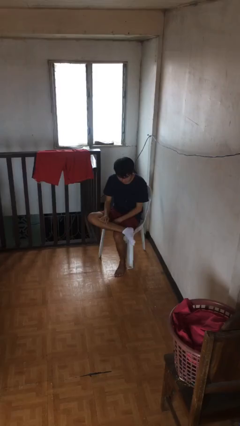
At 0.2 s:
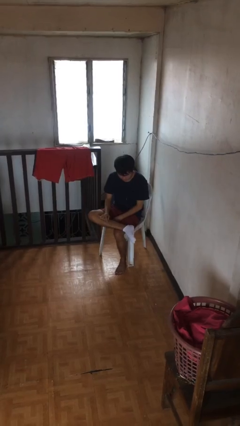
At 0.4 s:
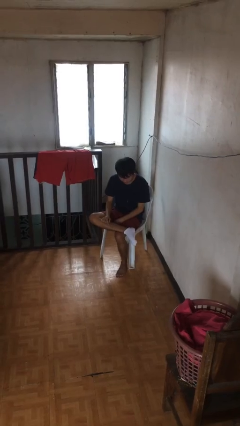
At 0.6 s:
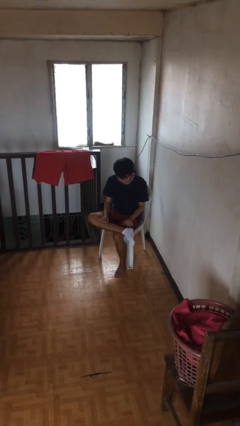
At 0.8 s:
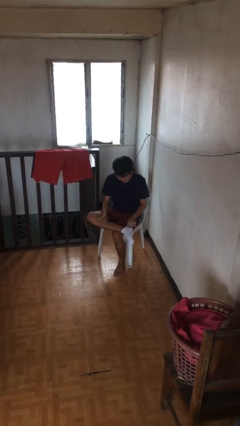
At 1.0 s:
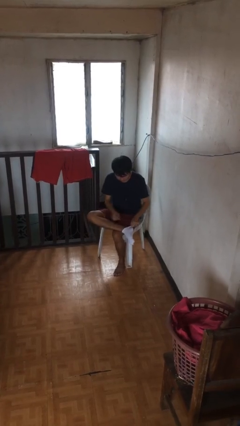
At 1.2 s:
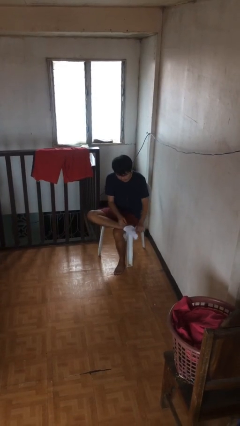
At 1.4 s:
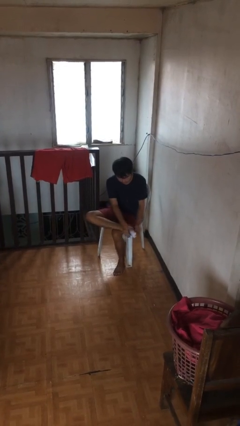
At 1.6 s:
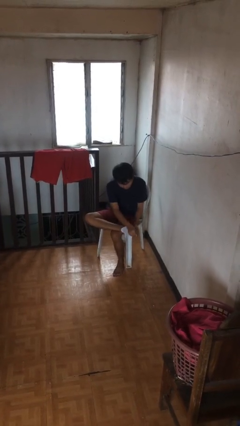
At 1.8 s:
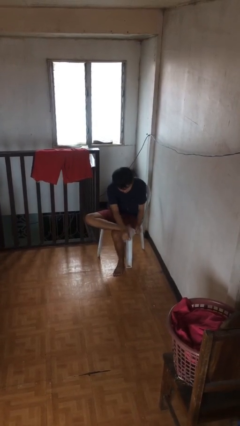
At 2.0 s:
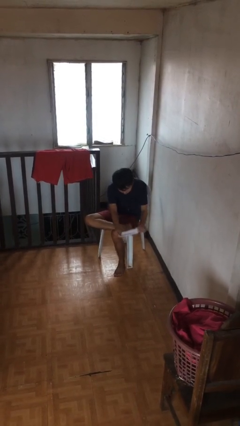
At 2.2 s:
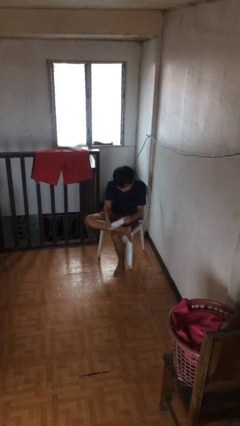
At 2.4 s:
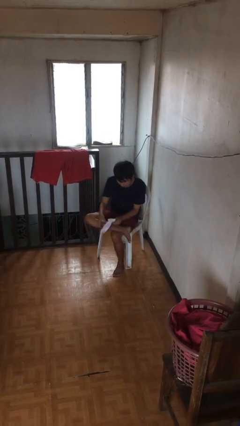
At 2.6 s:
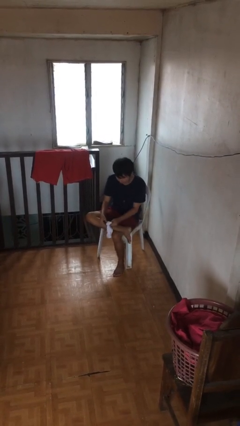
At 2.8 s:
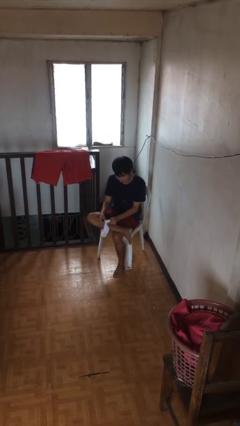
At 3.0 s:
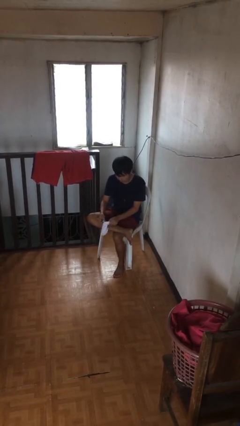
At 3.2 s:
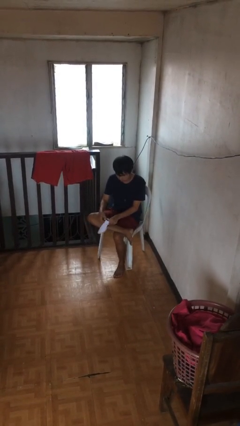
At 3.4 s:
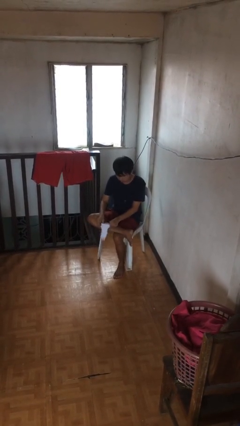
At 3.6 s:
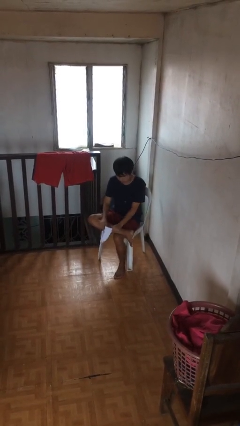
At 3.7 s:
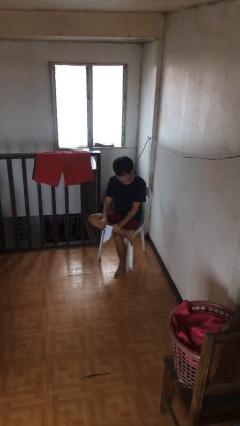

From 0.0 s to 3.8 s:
person takes off socks

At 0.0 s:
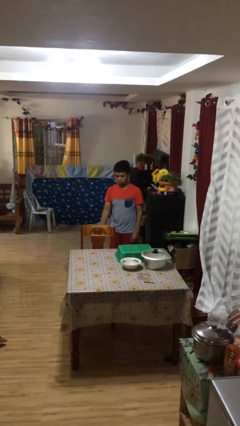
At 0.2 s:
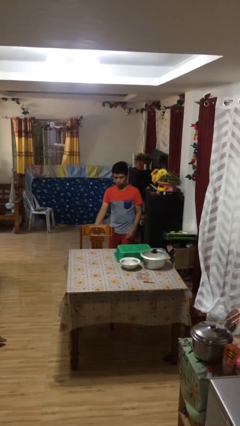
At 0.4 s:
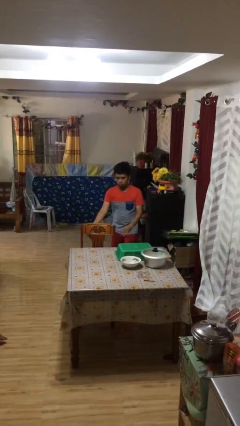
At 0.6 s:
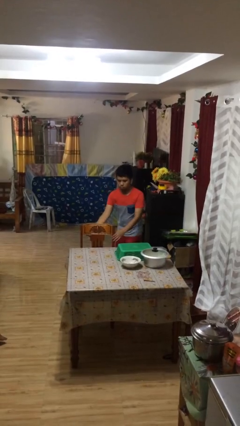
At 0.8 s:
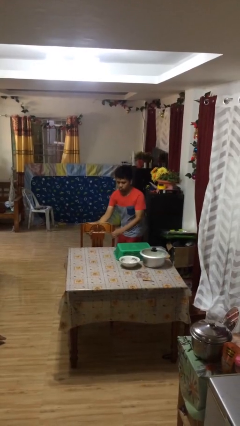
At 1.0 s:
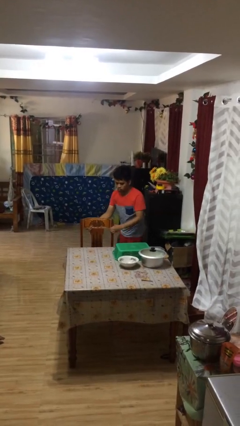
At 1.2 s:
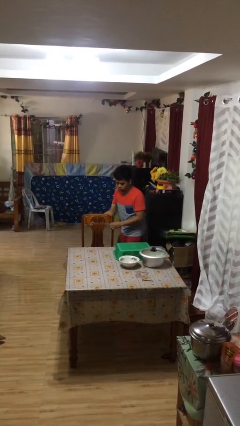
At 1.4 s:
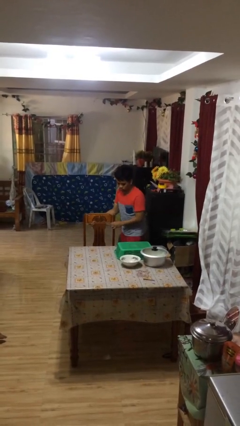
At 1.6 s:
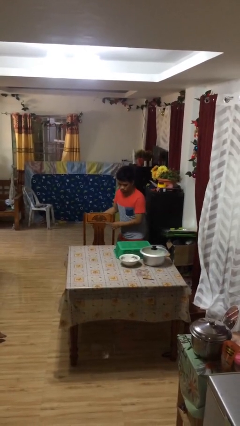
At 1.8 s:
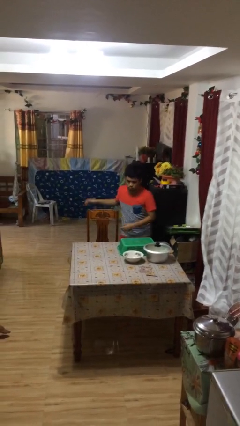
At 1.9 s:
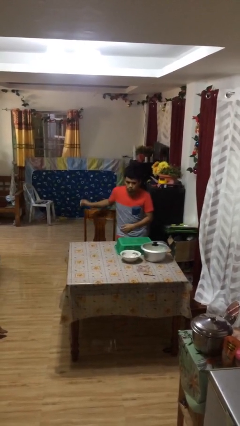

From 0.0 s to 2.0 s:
person stands up

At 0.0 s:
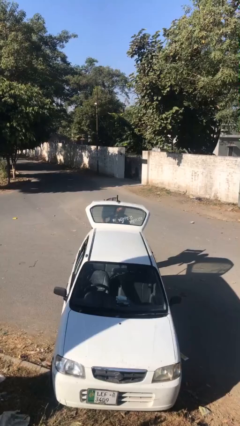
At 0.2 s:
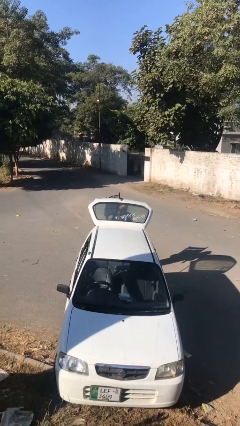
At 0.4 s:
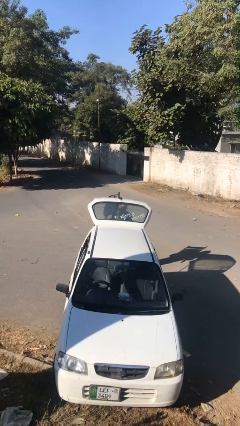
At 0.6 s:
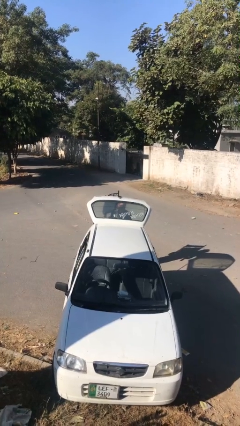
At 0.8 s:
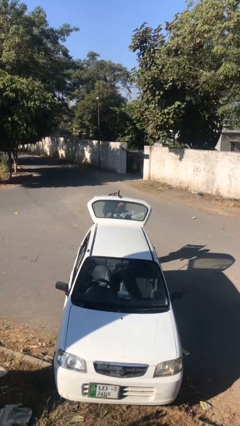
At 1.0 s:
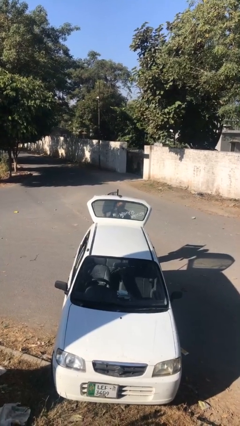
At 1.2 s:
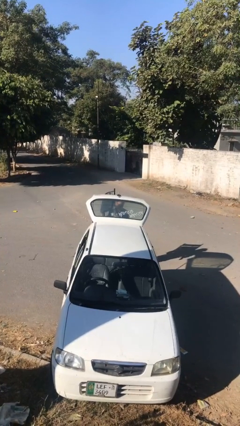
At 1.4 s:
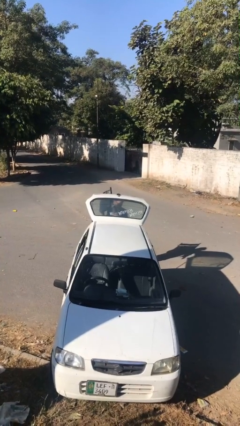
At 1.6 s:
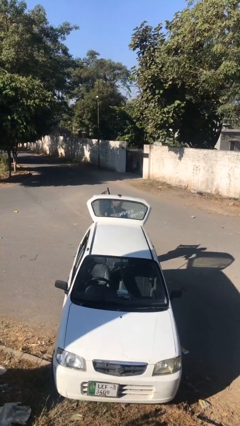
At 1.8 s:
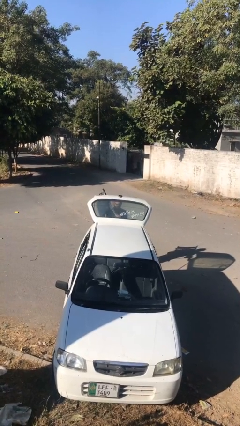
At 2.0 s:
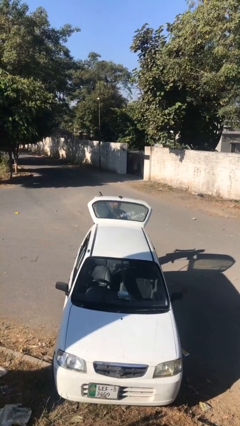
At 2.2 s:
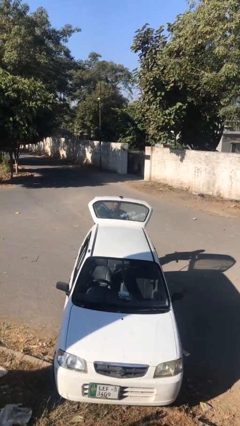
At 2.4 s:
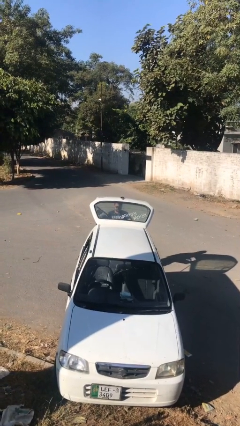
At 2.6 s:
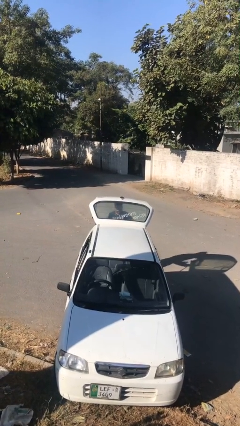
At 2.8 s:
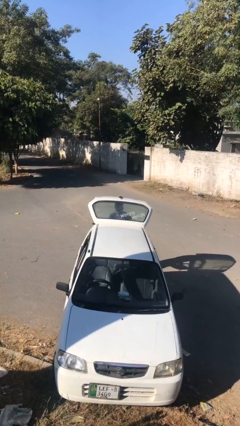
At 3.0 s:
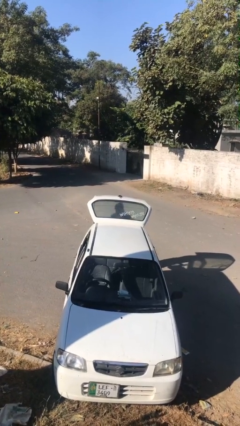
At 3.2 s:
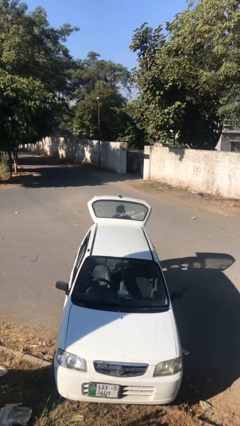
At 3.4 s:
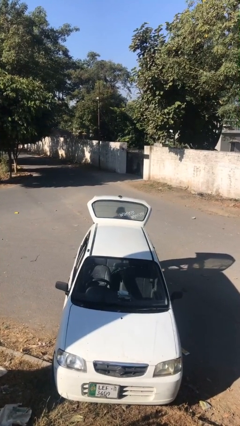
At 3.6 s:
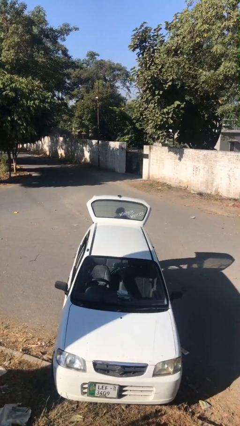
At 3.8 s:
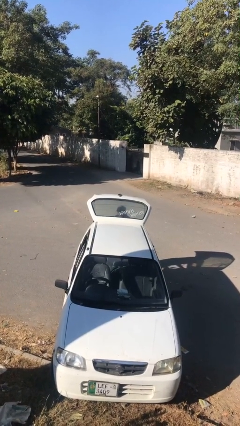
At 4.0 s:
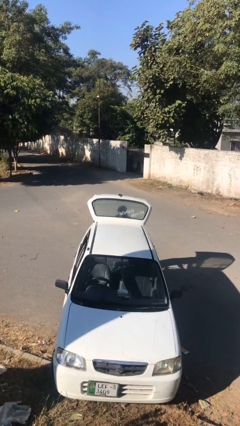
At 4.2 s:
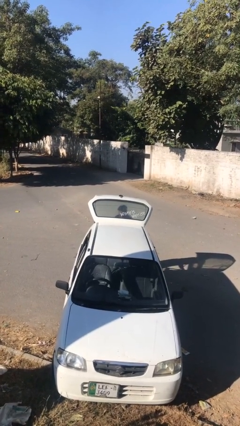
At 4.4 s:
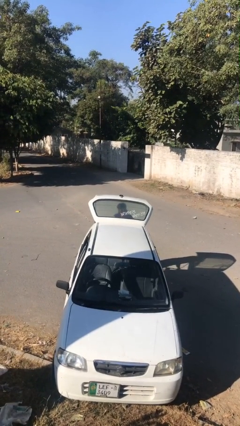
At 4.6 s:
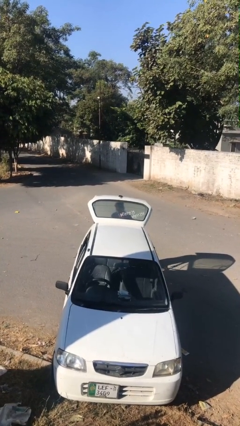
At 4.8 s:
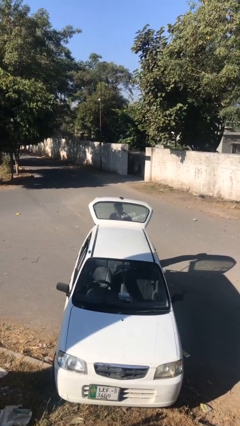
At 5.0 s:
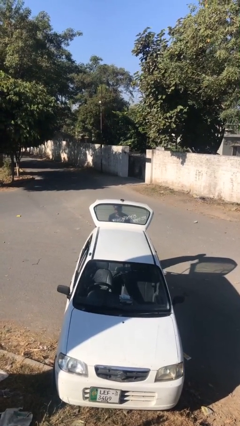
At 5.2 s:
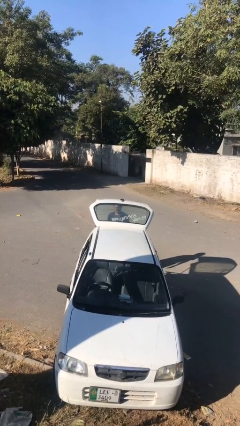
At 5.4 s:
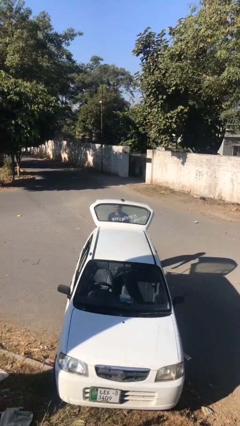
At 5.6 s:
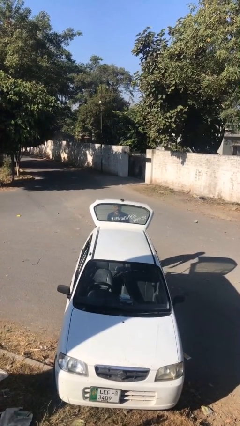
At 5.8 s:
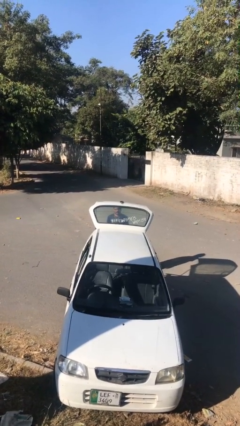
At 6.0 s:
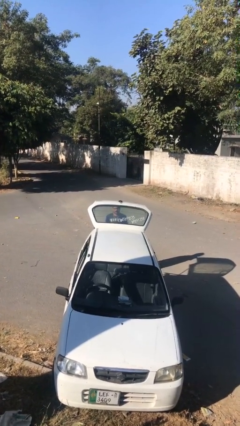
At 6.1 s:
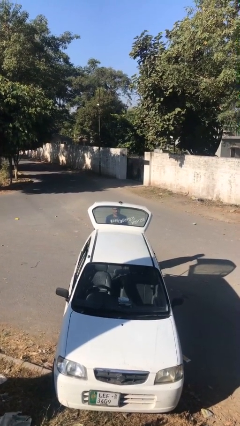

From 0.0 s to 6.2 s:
person loads car

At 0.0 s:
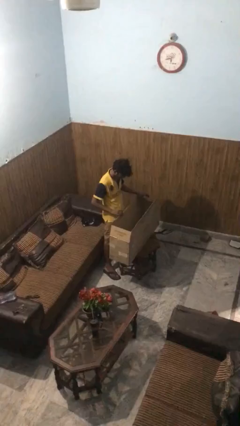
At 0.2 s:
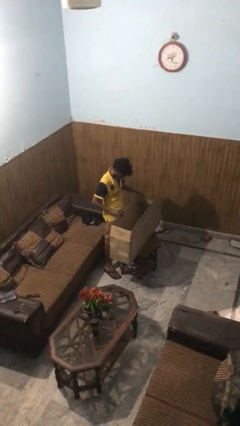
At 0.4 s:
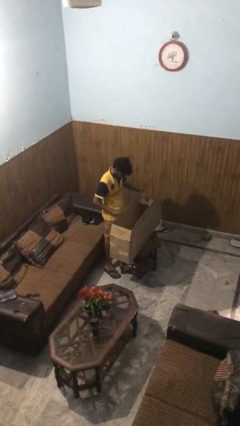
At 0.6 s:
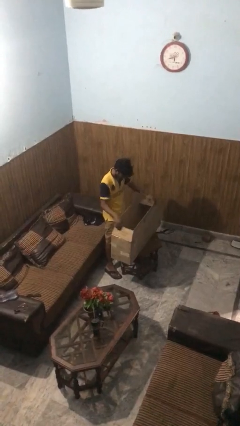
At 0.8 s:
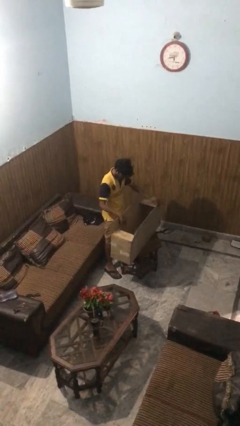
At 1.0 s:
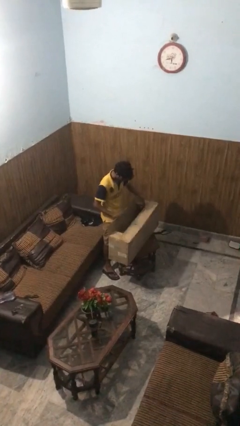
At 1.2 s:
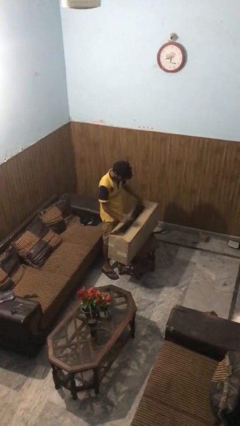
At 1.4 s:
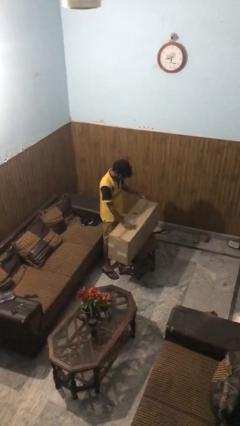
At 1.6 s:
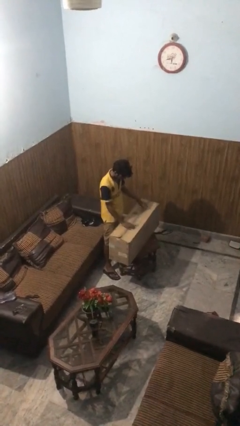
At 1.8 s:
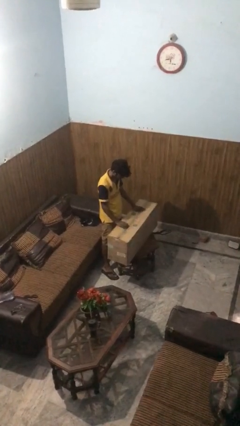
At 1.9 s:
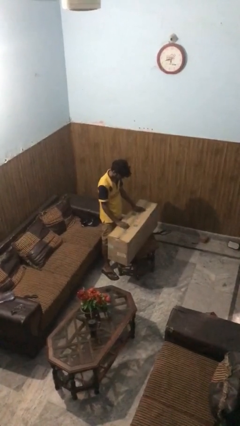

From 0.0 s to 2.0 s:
person closes box

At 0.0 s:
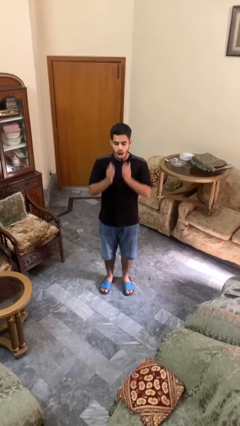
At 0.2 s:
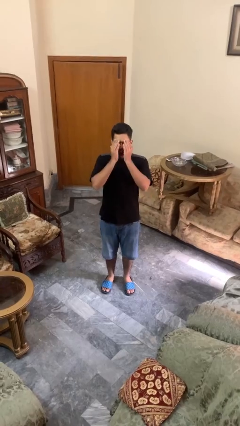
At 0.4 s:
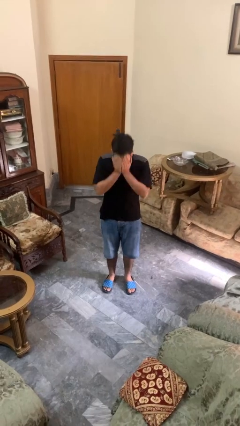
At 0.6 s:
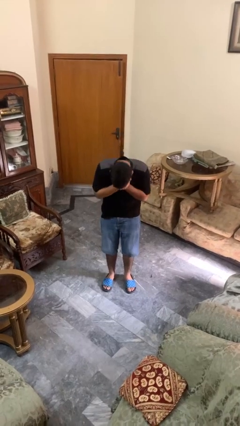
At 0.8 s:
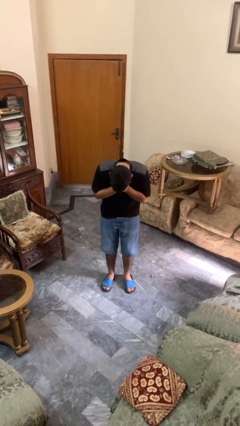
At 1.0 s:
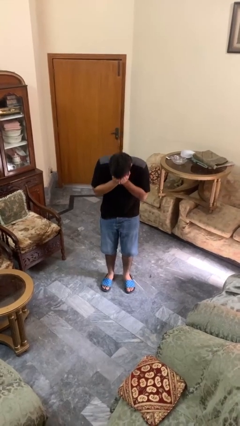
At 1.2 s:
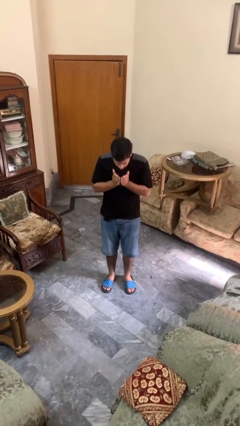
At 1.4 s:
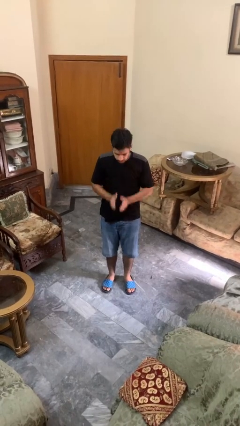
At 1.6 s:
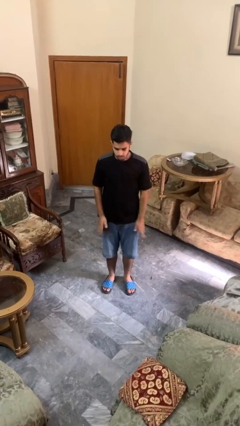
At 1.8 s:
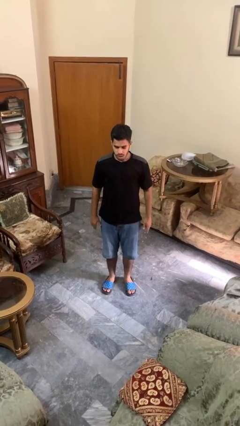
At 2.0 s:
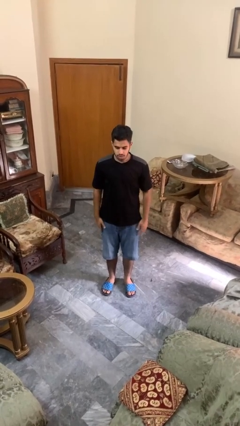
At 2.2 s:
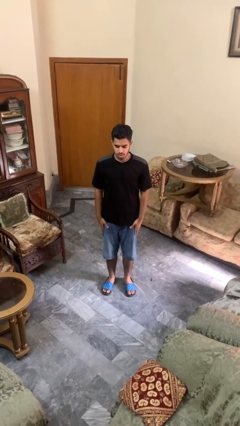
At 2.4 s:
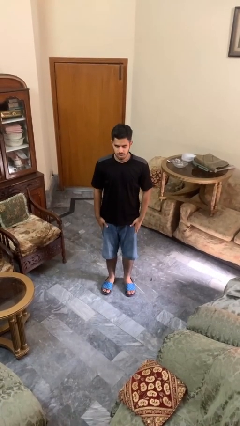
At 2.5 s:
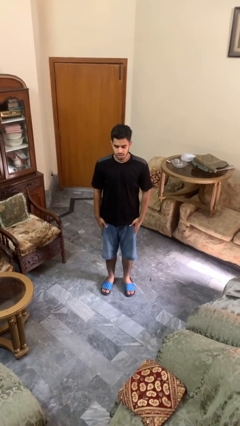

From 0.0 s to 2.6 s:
person sneezes into hand

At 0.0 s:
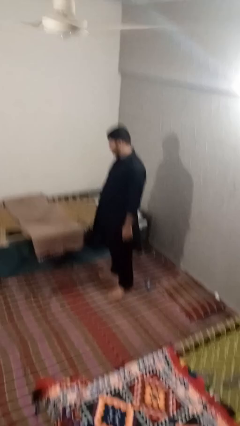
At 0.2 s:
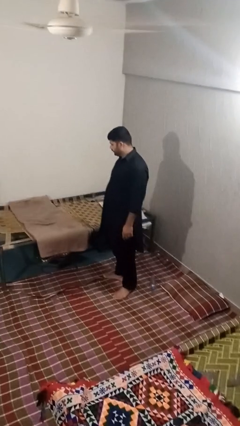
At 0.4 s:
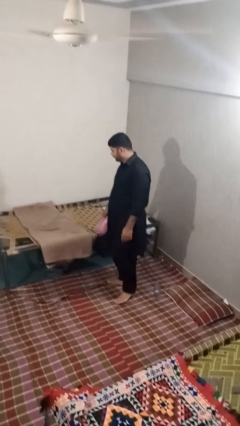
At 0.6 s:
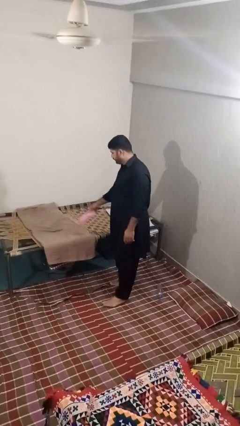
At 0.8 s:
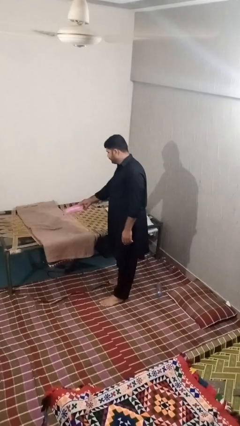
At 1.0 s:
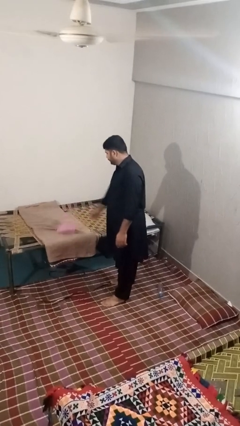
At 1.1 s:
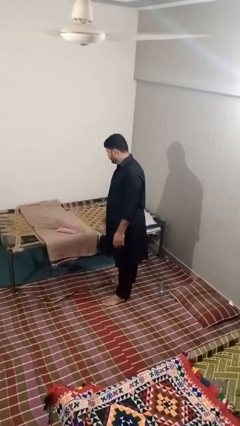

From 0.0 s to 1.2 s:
person puts down object on bed
